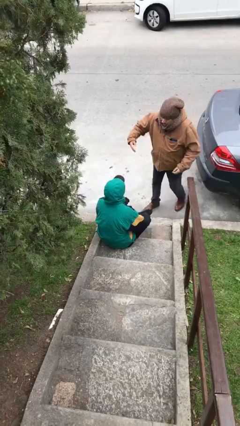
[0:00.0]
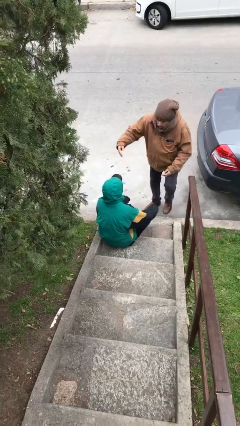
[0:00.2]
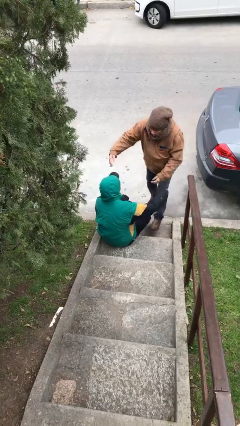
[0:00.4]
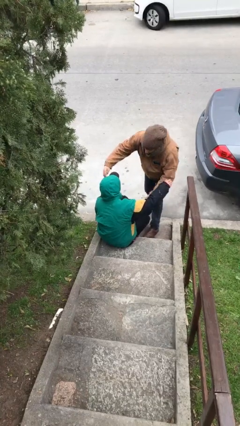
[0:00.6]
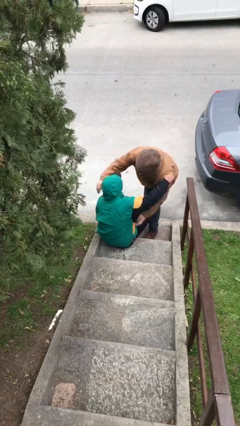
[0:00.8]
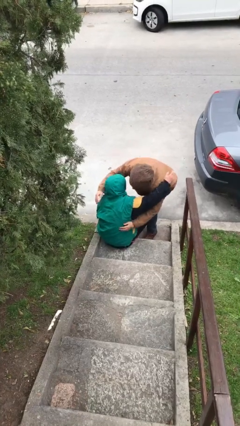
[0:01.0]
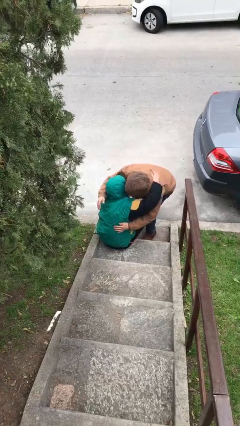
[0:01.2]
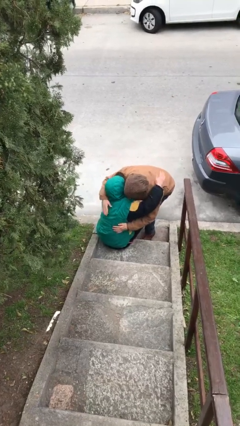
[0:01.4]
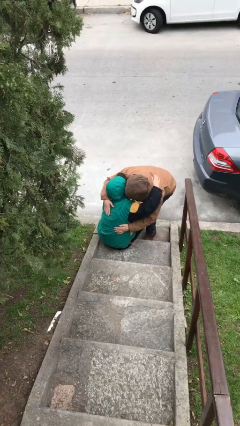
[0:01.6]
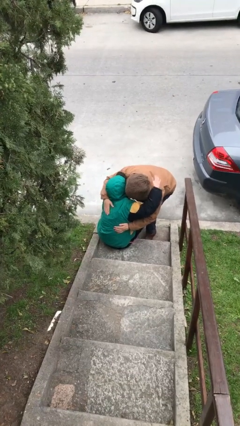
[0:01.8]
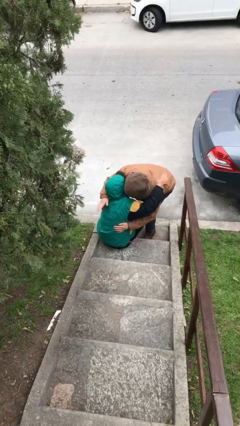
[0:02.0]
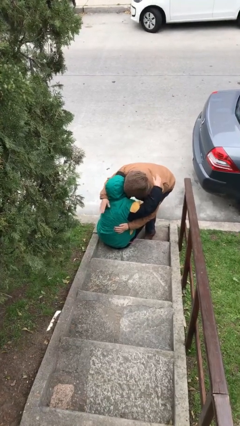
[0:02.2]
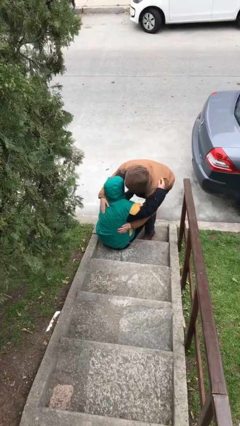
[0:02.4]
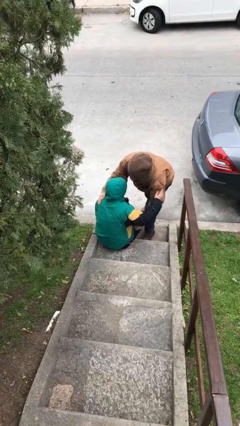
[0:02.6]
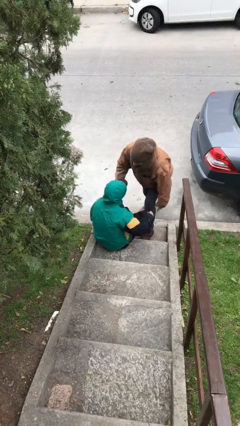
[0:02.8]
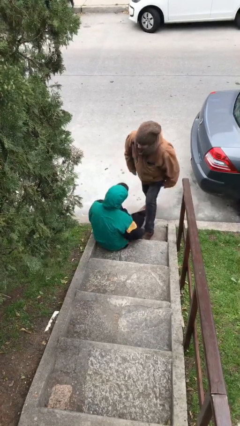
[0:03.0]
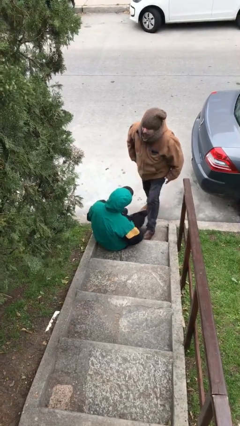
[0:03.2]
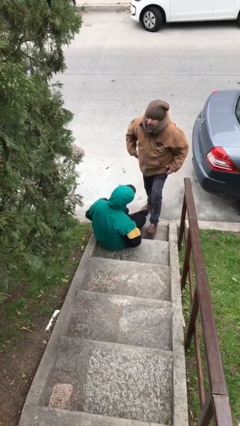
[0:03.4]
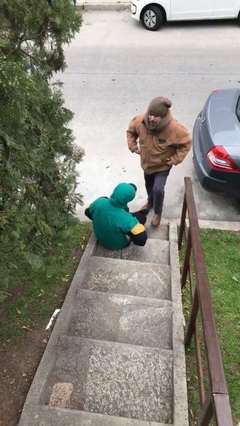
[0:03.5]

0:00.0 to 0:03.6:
person embraces person

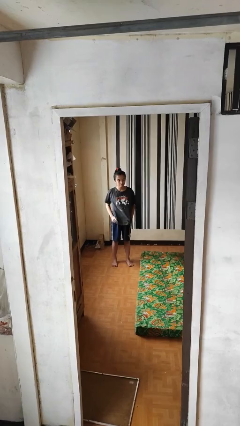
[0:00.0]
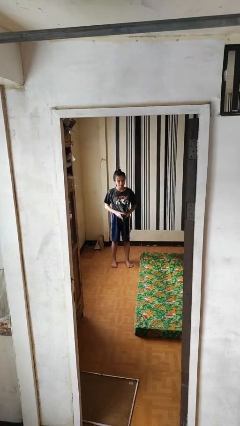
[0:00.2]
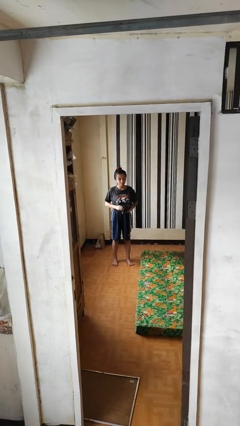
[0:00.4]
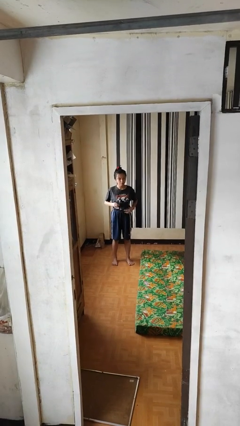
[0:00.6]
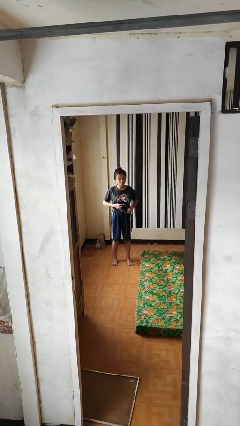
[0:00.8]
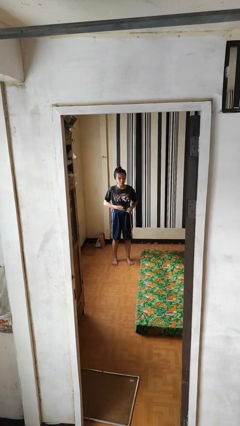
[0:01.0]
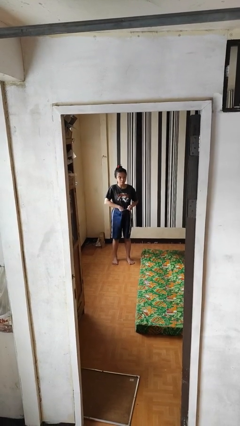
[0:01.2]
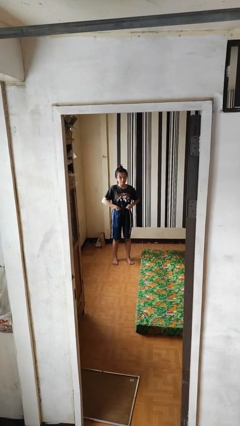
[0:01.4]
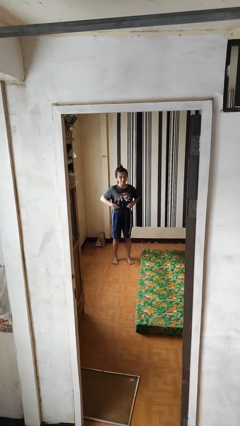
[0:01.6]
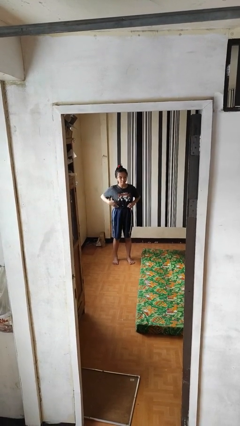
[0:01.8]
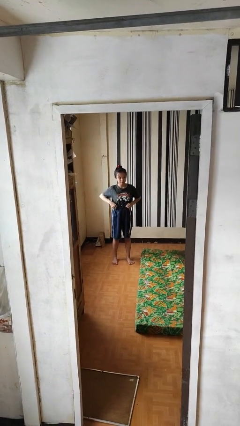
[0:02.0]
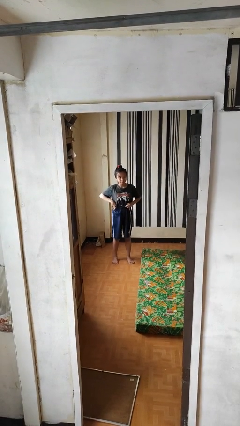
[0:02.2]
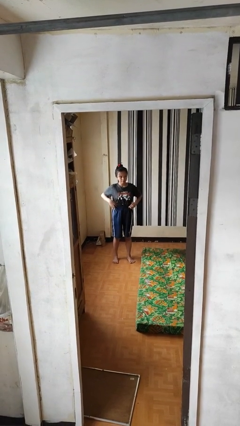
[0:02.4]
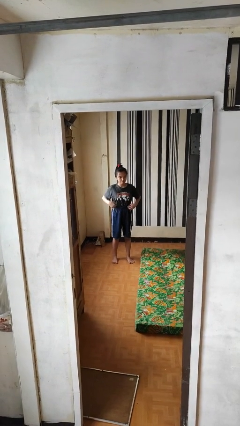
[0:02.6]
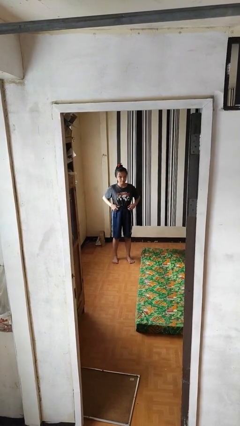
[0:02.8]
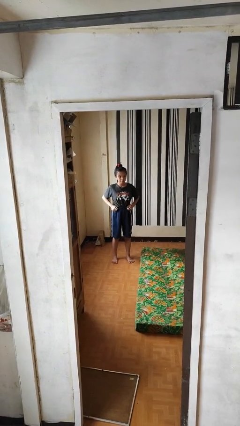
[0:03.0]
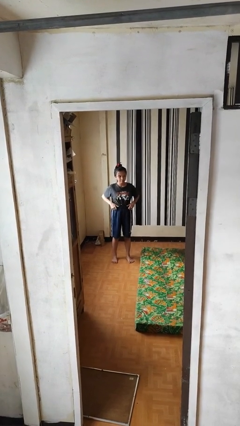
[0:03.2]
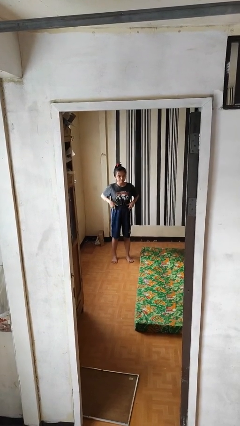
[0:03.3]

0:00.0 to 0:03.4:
person tucks in shirt

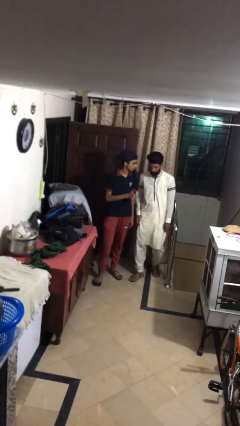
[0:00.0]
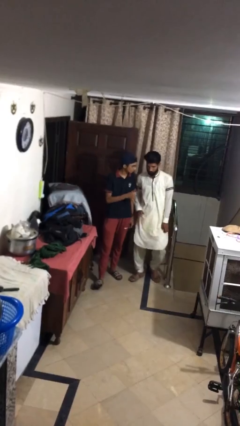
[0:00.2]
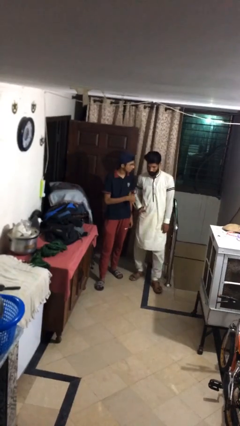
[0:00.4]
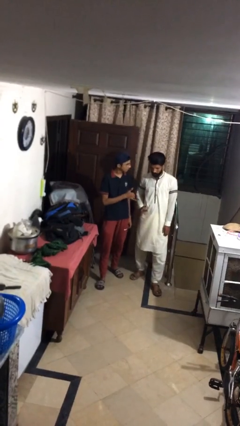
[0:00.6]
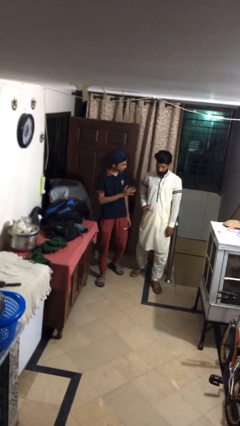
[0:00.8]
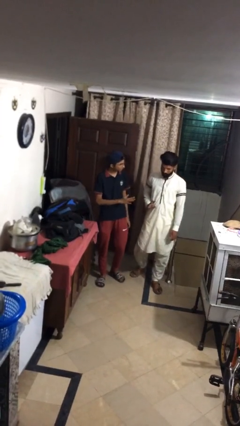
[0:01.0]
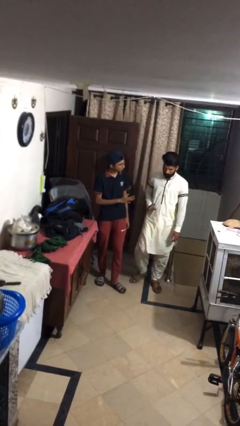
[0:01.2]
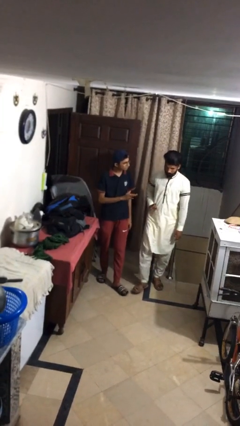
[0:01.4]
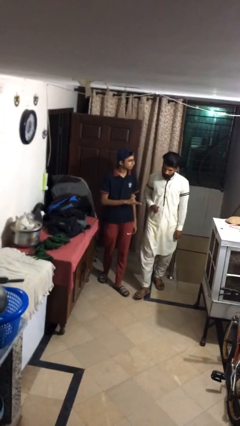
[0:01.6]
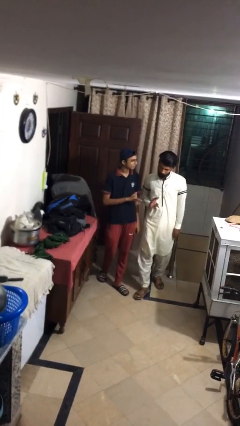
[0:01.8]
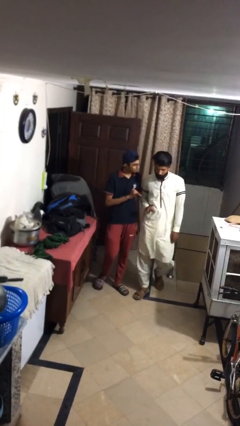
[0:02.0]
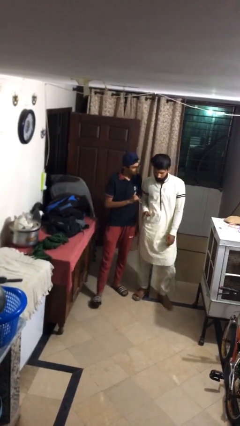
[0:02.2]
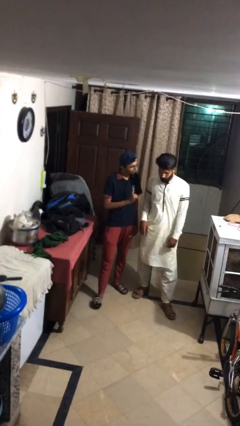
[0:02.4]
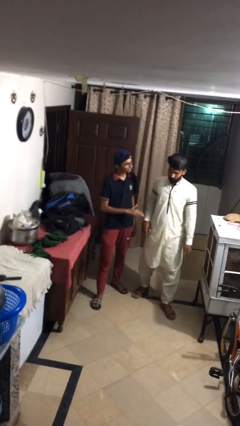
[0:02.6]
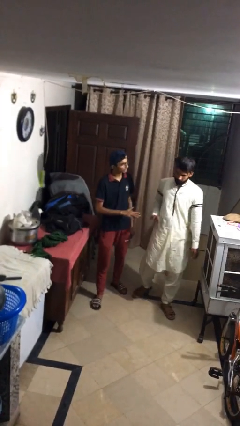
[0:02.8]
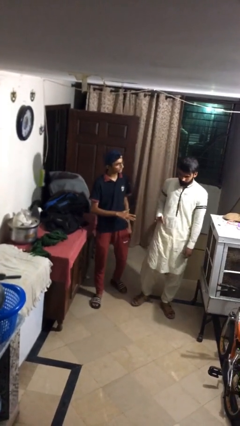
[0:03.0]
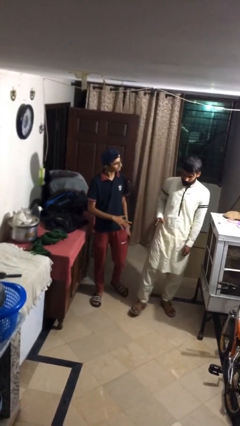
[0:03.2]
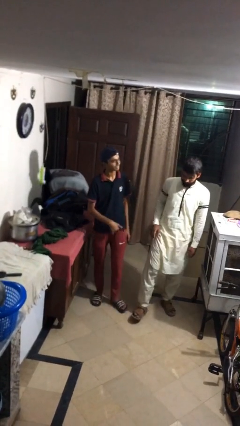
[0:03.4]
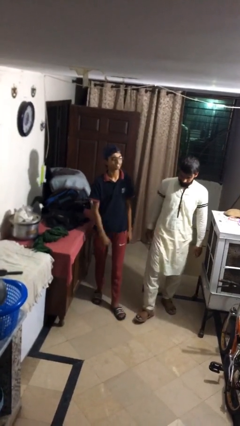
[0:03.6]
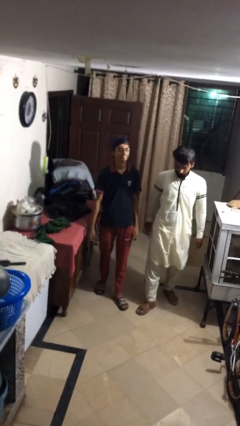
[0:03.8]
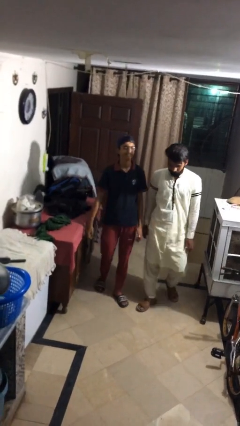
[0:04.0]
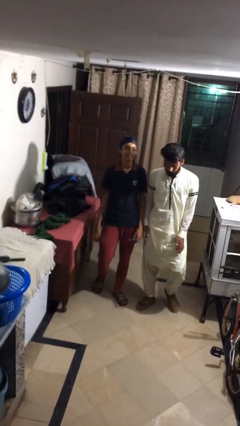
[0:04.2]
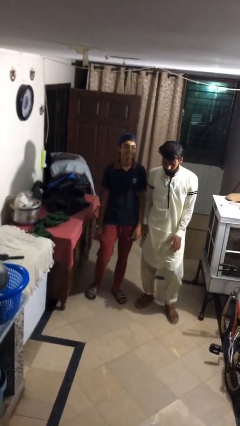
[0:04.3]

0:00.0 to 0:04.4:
person talks to person

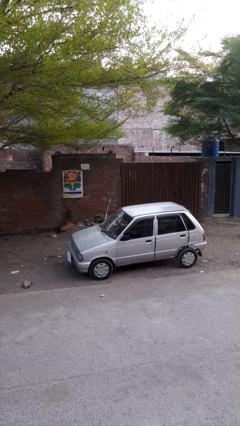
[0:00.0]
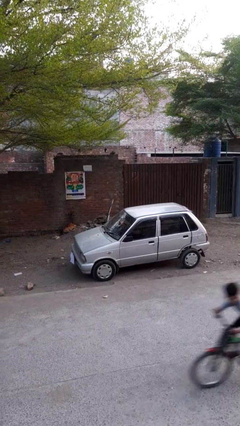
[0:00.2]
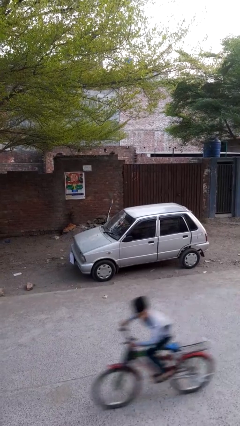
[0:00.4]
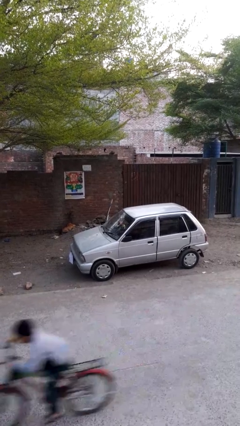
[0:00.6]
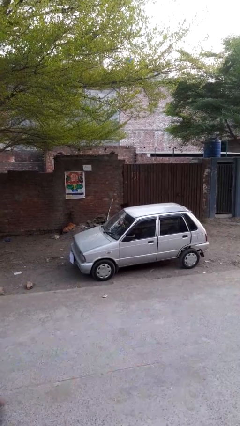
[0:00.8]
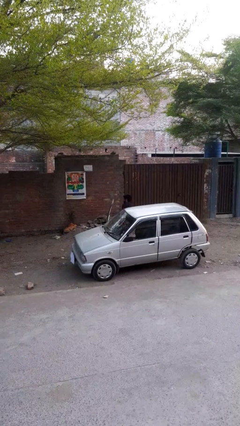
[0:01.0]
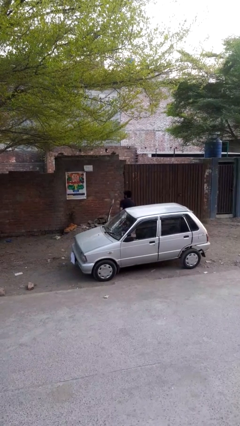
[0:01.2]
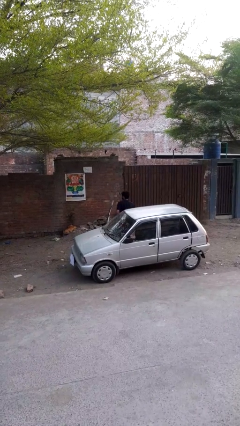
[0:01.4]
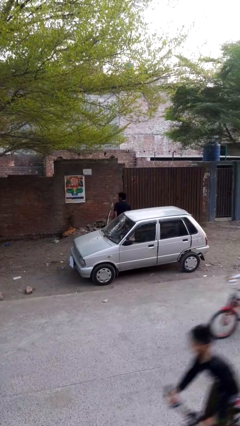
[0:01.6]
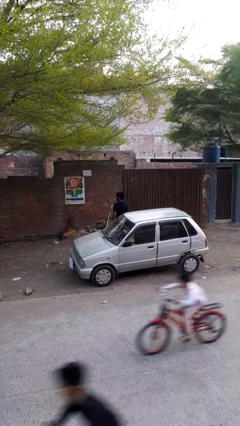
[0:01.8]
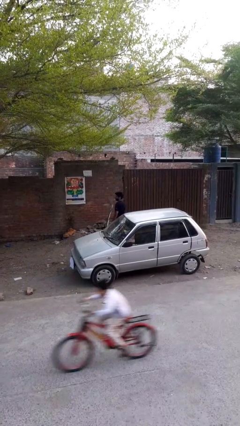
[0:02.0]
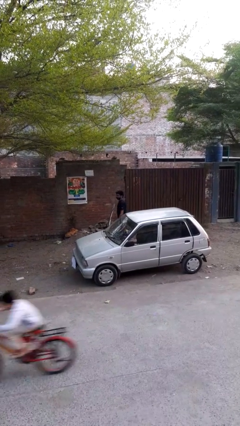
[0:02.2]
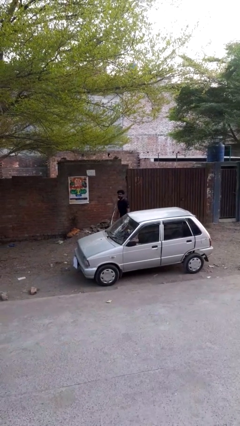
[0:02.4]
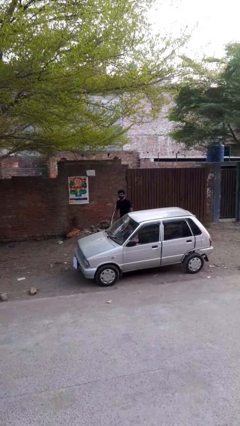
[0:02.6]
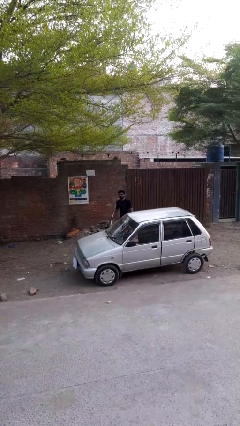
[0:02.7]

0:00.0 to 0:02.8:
person exits car

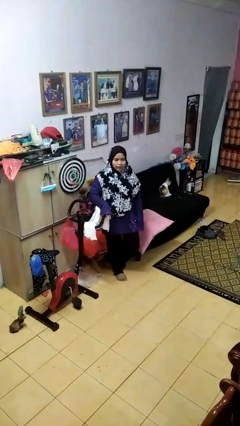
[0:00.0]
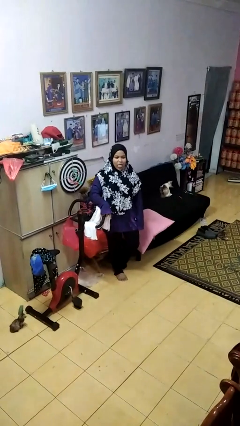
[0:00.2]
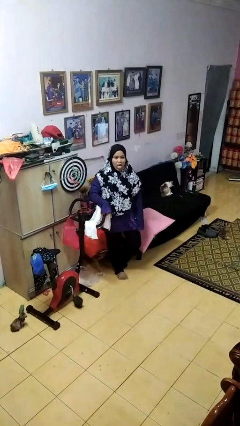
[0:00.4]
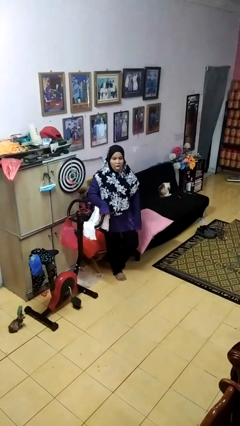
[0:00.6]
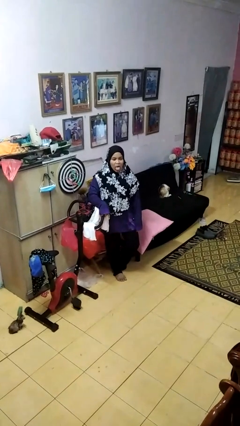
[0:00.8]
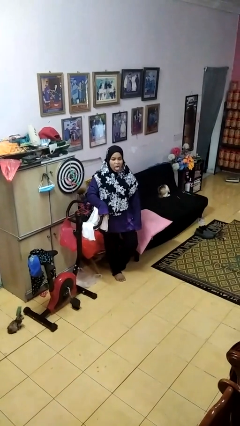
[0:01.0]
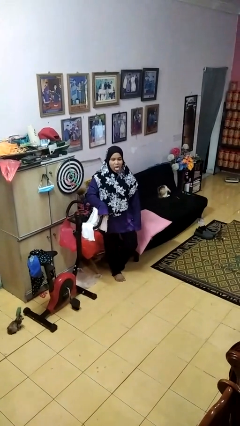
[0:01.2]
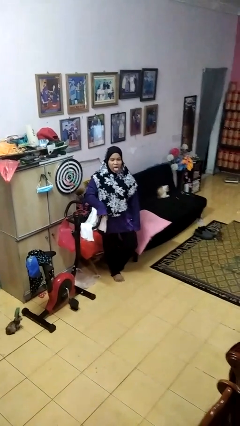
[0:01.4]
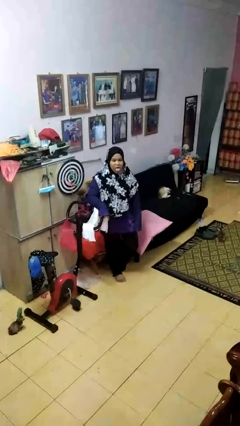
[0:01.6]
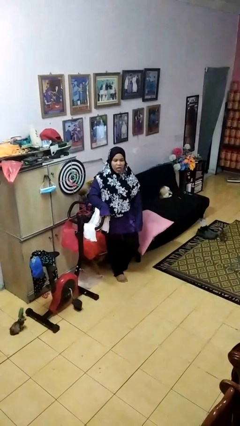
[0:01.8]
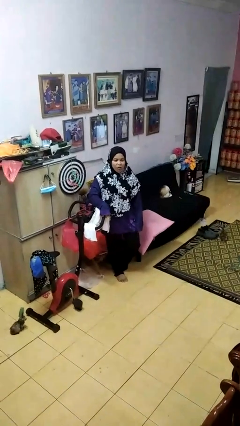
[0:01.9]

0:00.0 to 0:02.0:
person sticks out tongue

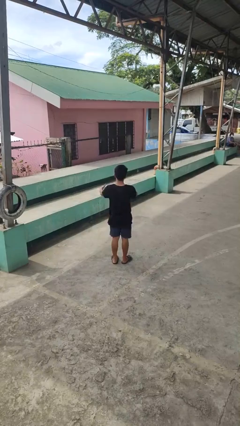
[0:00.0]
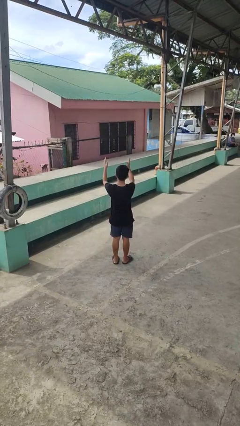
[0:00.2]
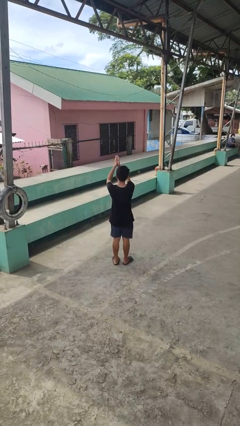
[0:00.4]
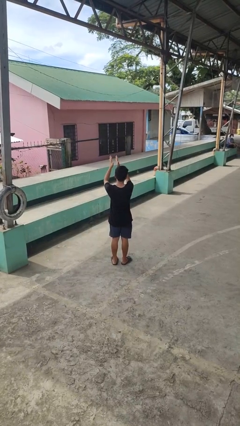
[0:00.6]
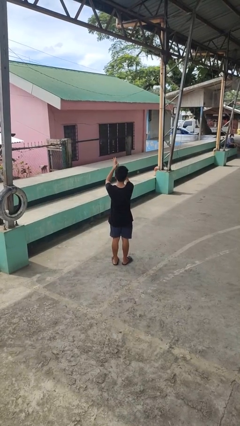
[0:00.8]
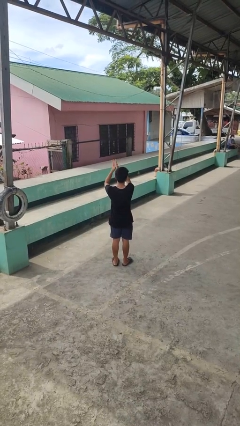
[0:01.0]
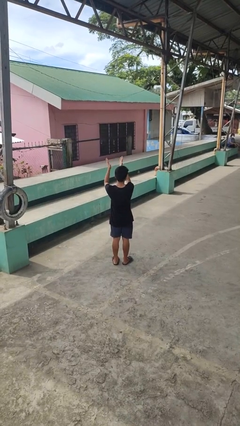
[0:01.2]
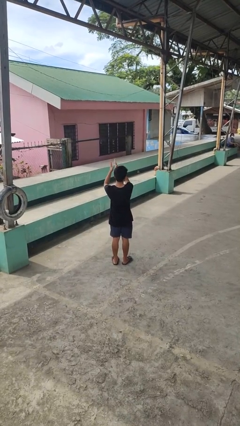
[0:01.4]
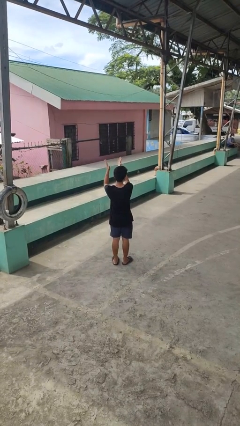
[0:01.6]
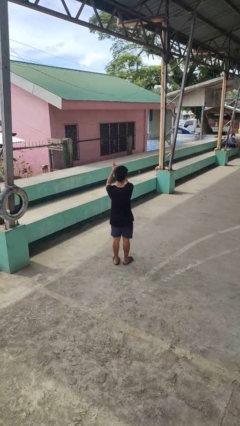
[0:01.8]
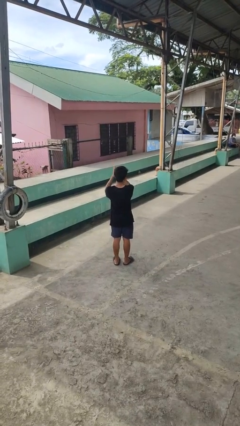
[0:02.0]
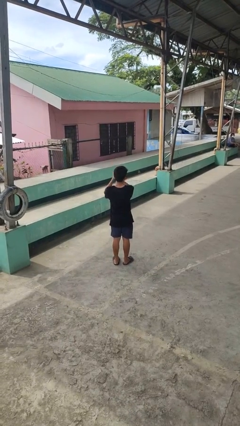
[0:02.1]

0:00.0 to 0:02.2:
person claps hands
